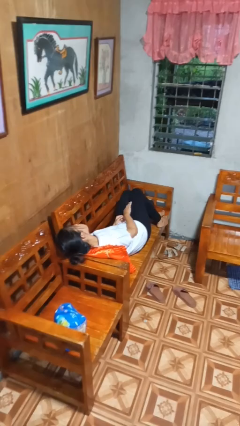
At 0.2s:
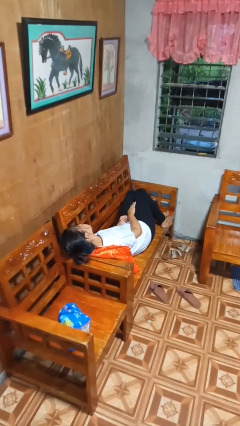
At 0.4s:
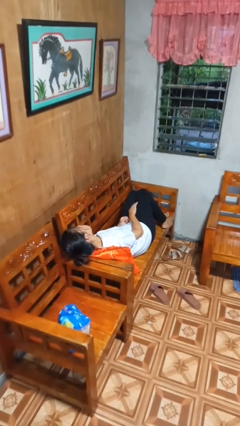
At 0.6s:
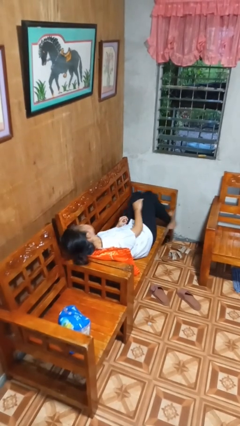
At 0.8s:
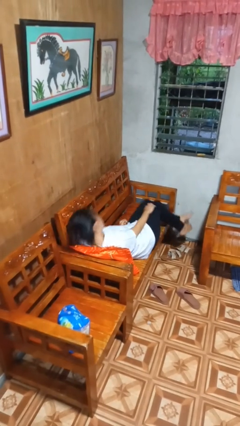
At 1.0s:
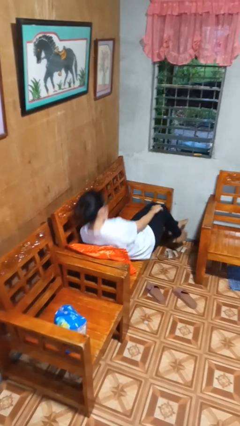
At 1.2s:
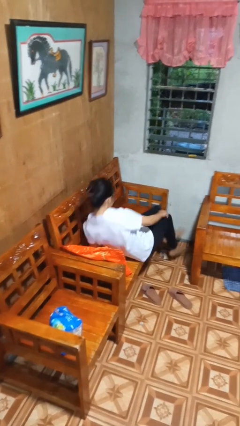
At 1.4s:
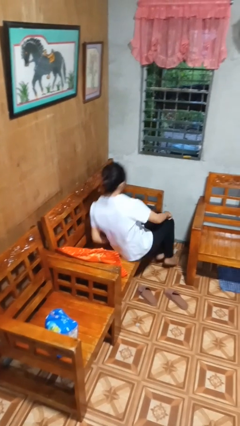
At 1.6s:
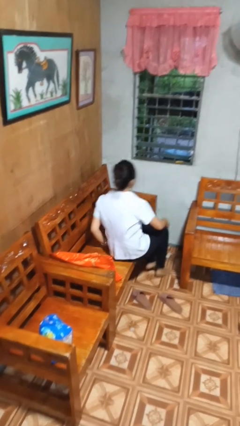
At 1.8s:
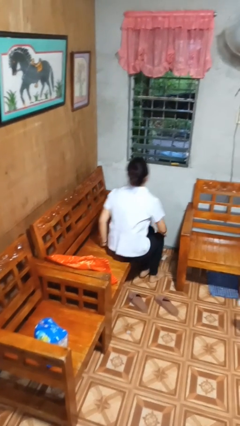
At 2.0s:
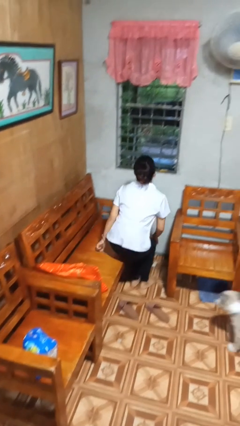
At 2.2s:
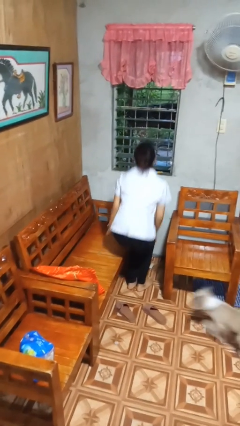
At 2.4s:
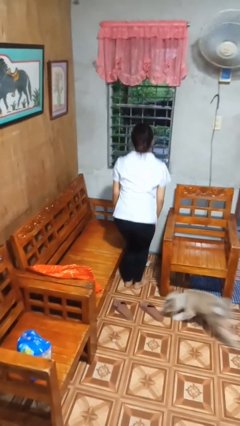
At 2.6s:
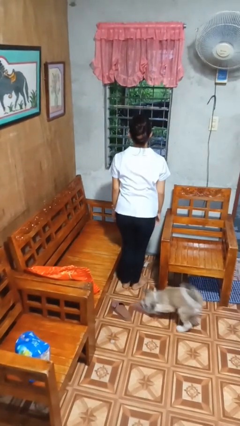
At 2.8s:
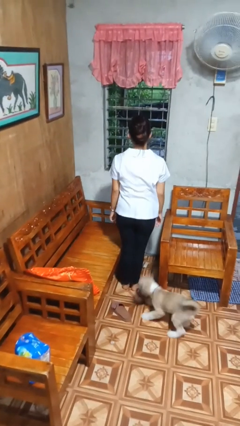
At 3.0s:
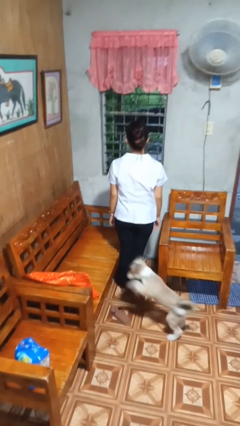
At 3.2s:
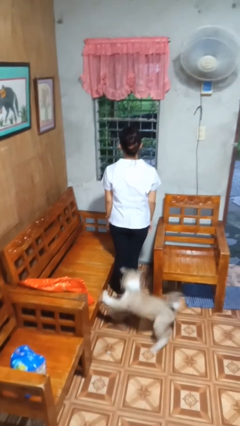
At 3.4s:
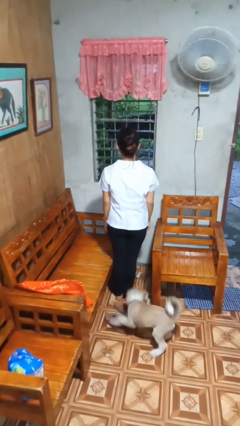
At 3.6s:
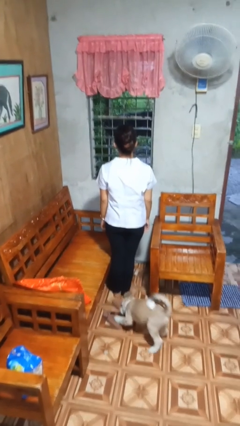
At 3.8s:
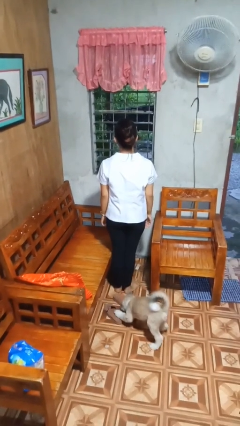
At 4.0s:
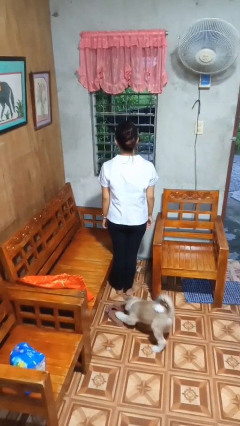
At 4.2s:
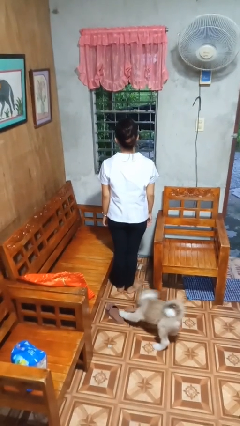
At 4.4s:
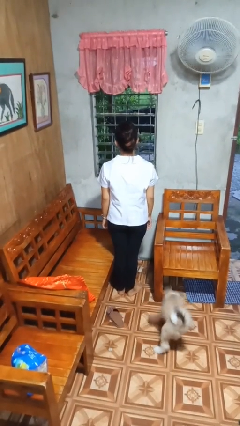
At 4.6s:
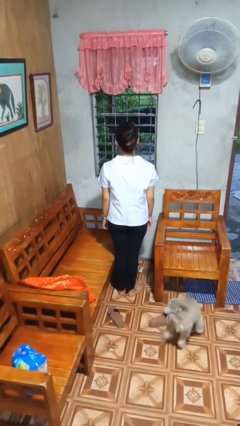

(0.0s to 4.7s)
person stands up

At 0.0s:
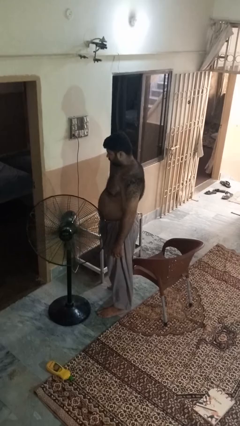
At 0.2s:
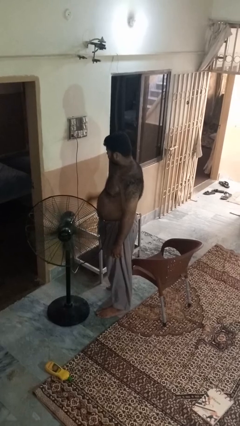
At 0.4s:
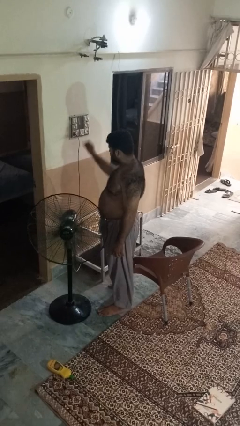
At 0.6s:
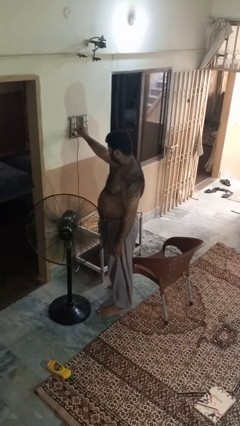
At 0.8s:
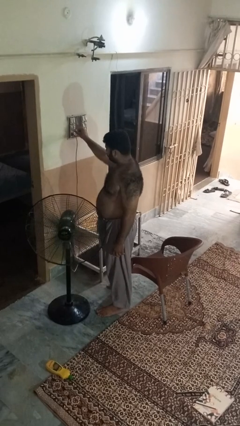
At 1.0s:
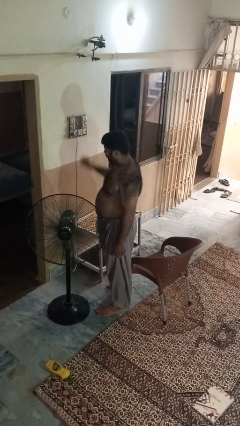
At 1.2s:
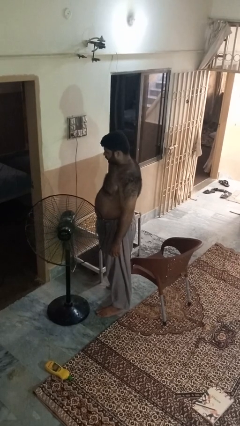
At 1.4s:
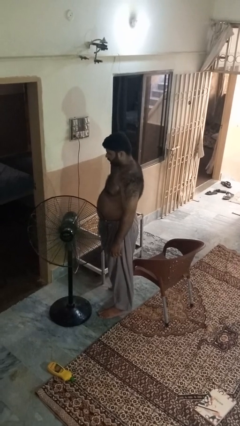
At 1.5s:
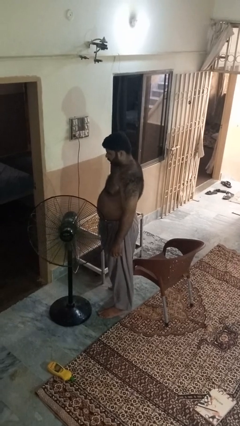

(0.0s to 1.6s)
person turns on fan

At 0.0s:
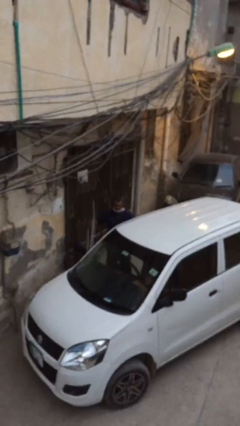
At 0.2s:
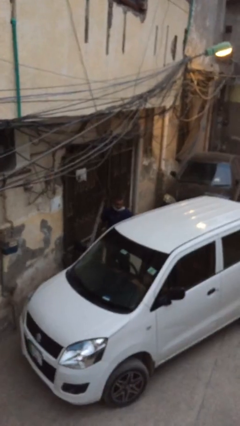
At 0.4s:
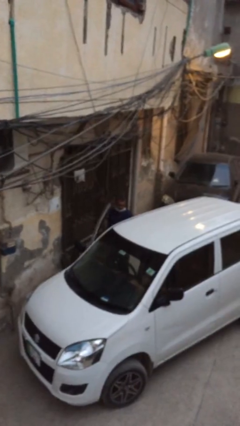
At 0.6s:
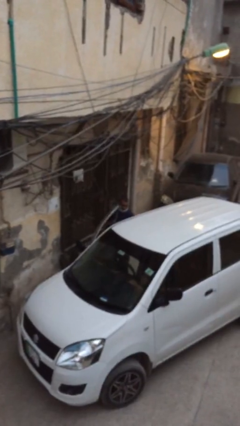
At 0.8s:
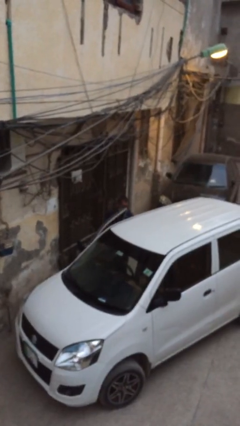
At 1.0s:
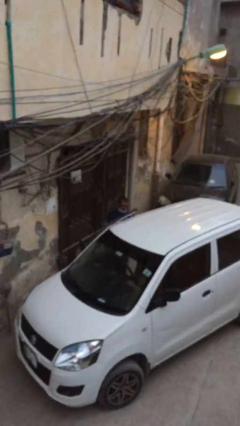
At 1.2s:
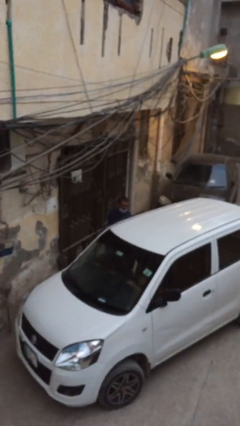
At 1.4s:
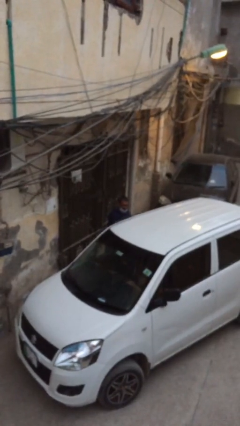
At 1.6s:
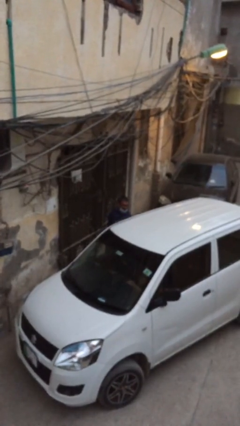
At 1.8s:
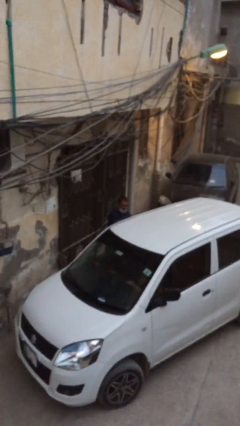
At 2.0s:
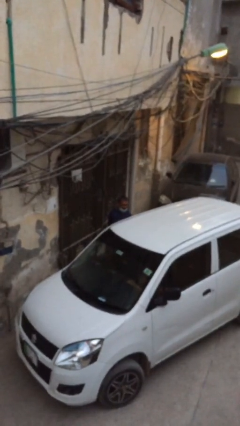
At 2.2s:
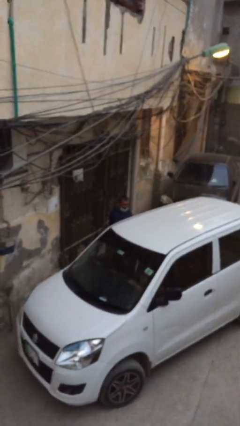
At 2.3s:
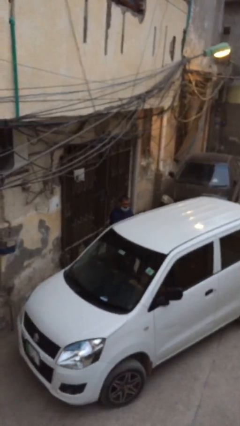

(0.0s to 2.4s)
person closes car door

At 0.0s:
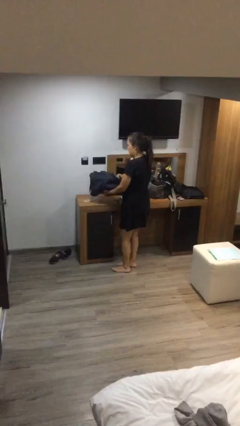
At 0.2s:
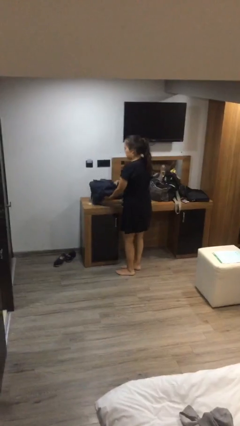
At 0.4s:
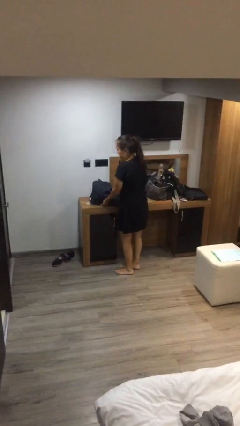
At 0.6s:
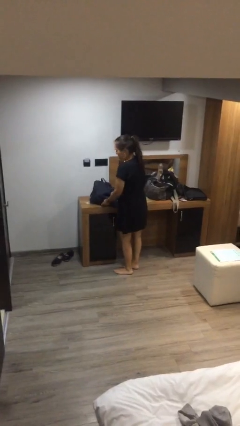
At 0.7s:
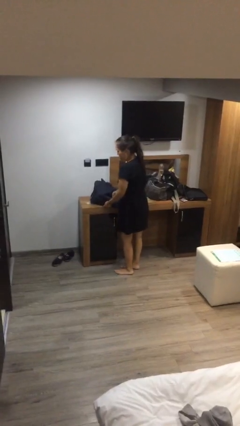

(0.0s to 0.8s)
person puts down object on table

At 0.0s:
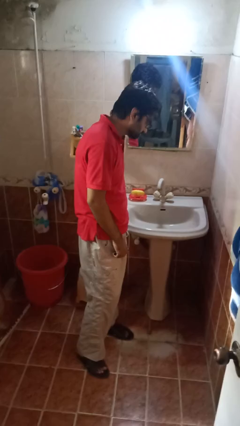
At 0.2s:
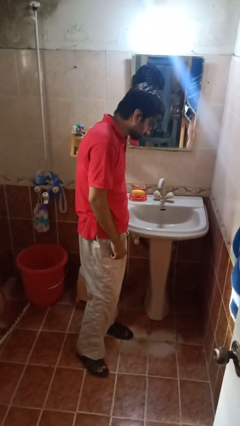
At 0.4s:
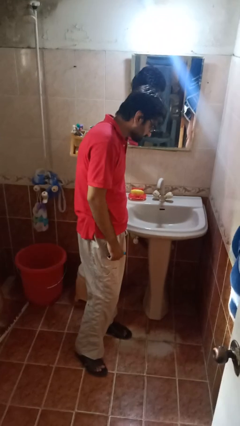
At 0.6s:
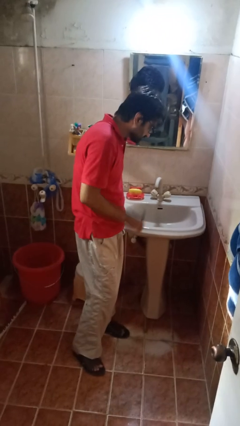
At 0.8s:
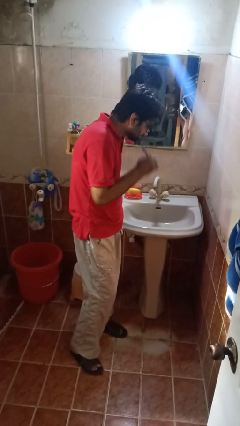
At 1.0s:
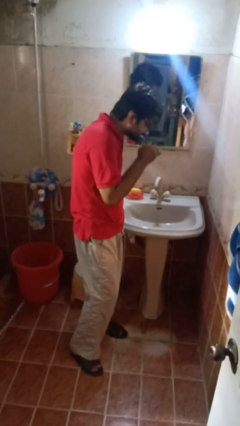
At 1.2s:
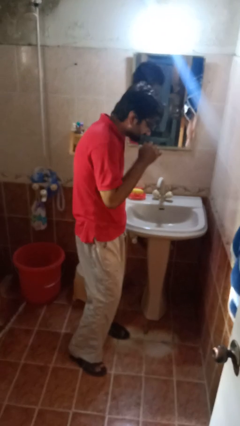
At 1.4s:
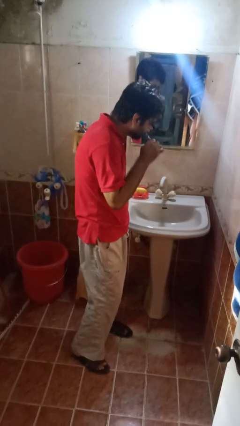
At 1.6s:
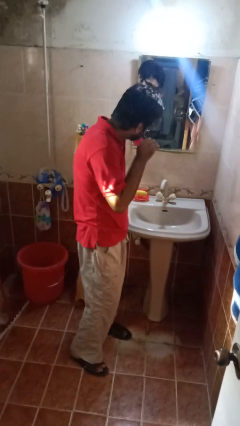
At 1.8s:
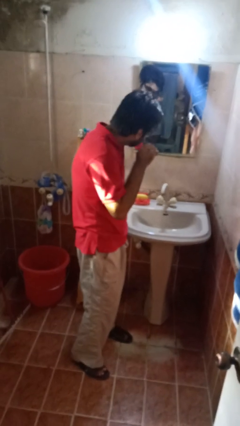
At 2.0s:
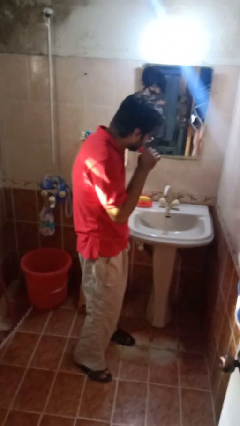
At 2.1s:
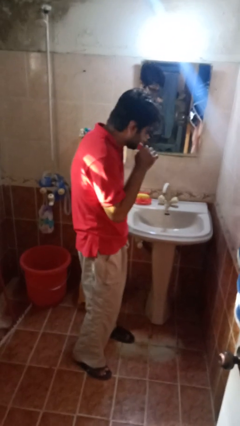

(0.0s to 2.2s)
person brushes teeth

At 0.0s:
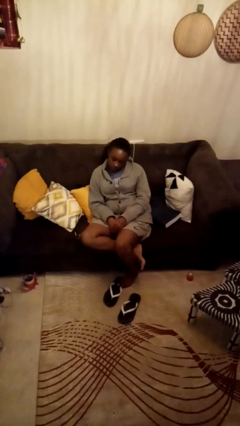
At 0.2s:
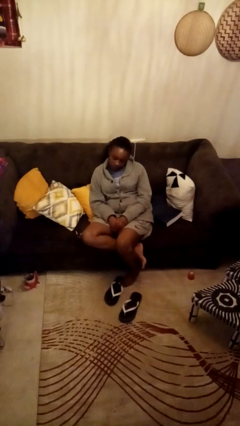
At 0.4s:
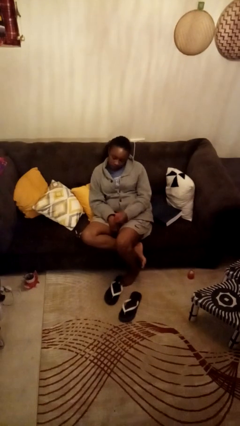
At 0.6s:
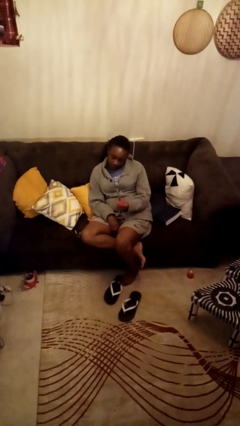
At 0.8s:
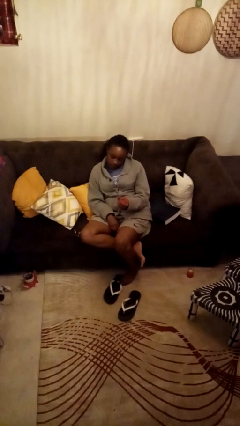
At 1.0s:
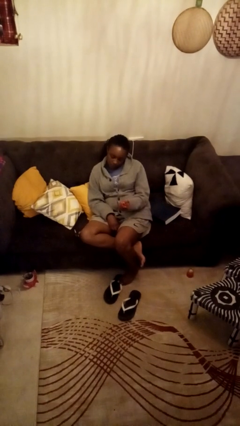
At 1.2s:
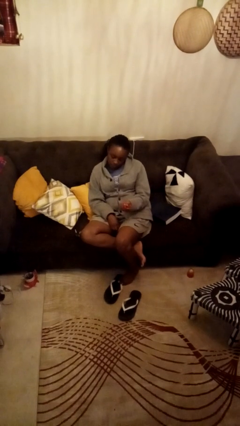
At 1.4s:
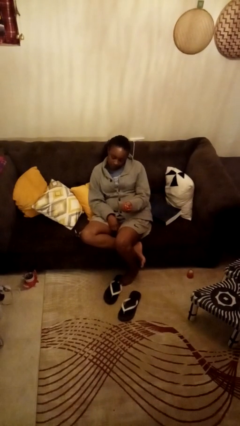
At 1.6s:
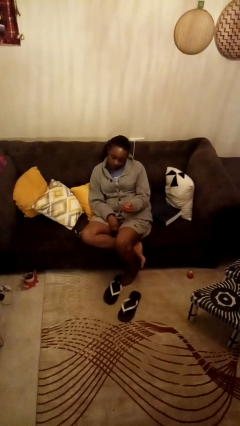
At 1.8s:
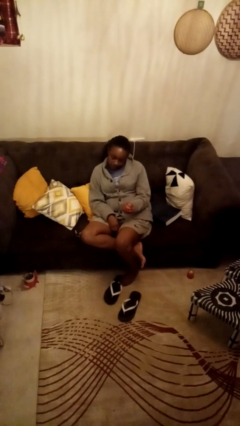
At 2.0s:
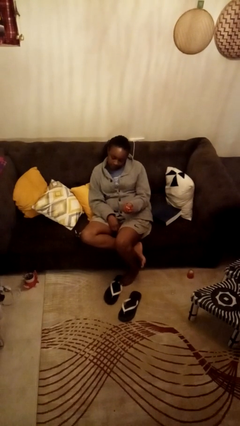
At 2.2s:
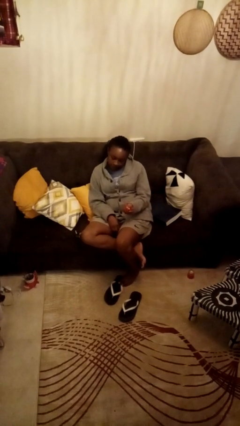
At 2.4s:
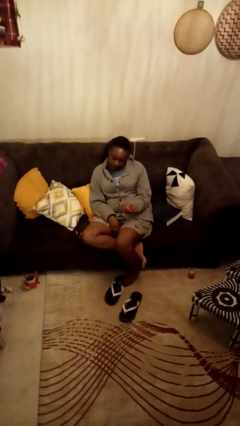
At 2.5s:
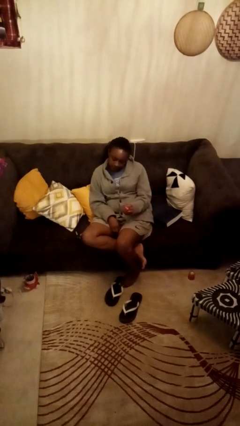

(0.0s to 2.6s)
person squeezes object

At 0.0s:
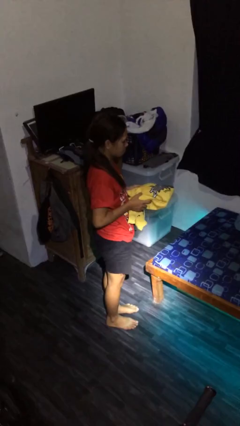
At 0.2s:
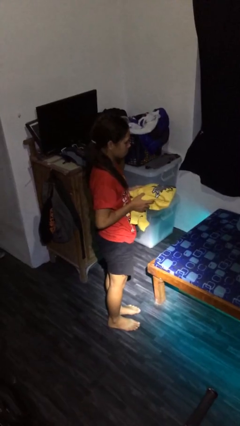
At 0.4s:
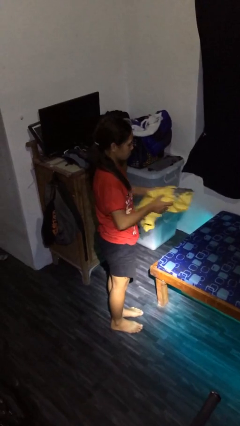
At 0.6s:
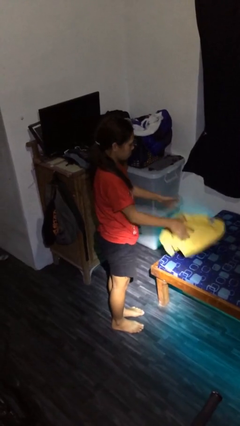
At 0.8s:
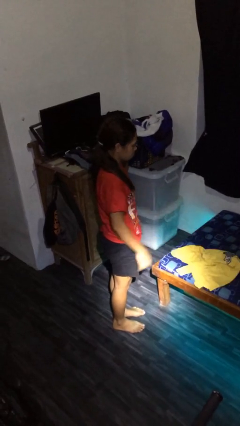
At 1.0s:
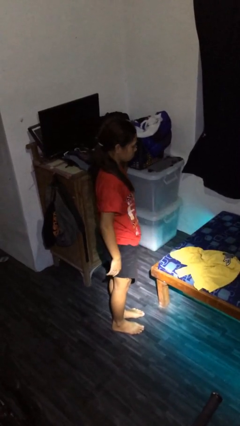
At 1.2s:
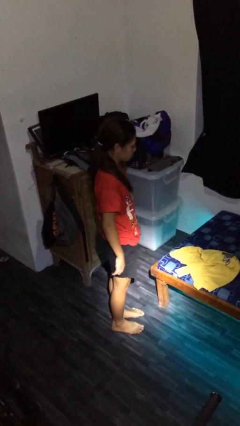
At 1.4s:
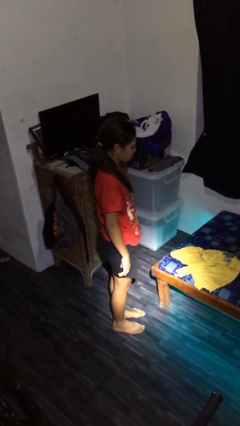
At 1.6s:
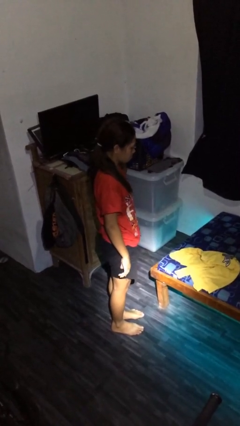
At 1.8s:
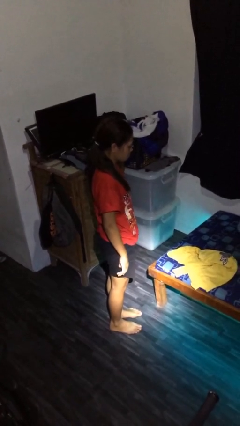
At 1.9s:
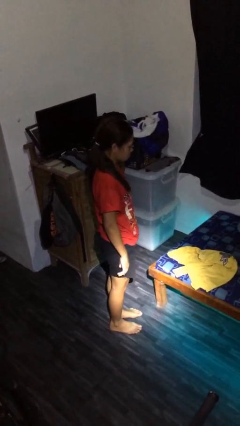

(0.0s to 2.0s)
person throws object on bed

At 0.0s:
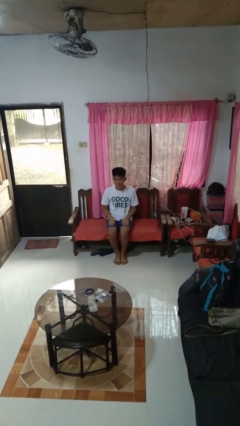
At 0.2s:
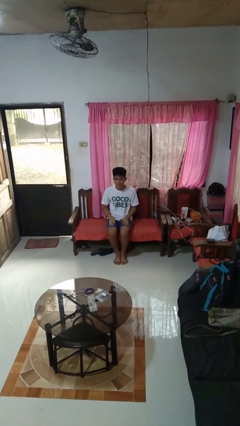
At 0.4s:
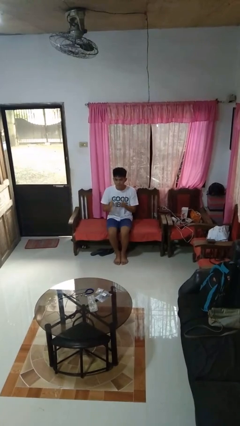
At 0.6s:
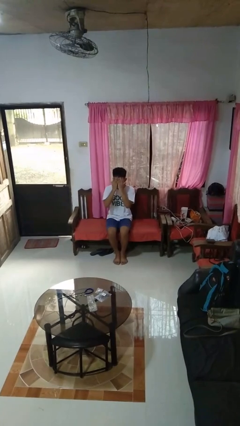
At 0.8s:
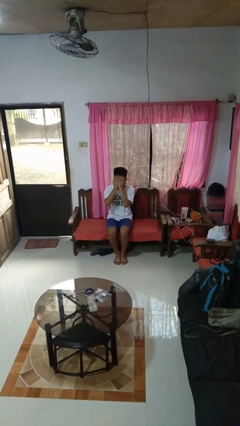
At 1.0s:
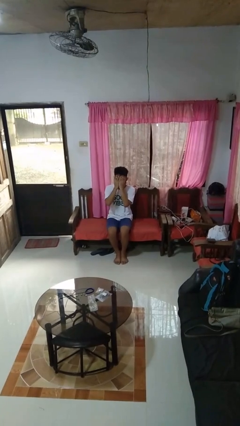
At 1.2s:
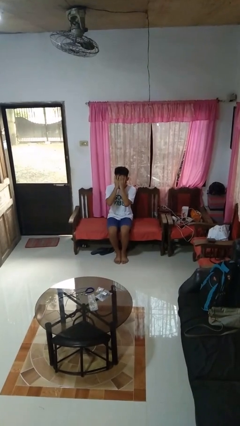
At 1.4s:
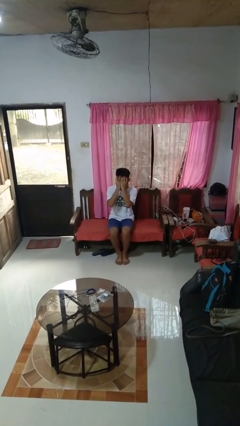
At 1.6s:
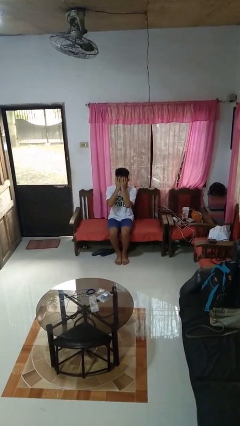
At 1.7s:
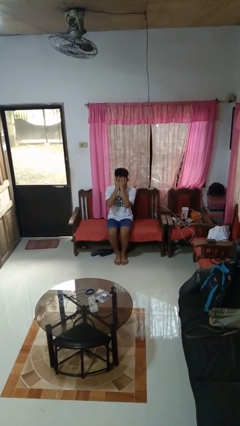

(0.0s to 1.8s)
person covers face with hands
